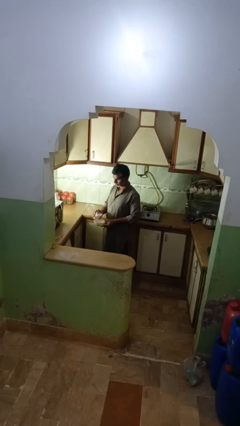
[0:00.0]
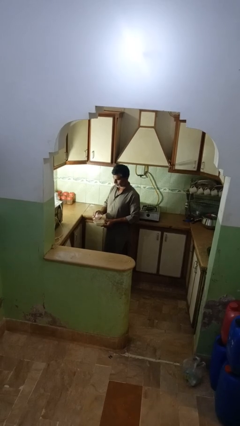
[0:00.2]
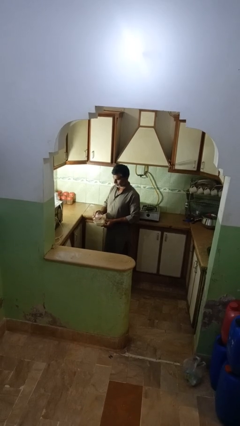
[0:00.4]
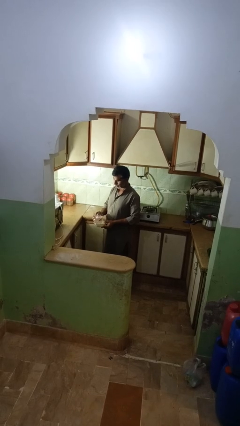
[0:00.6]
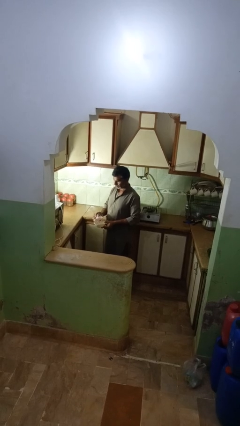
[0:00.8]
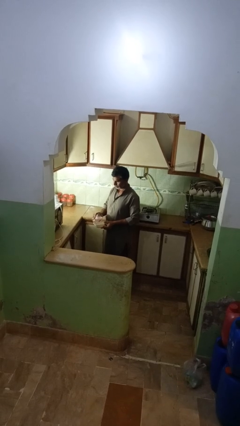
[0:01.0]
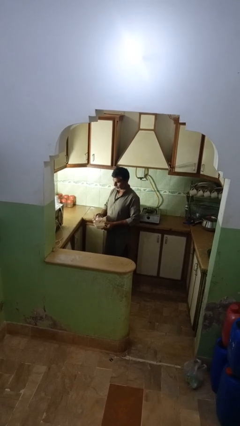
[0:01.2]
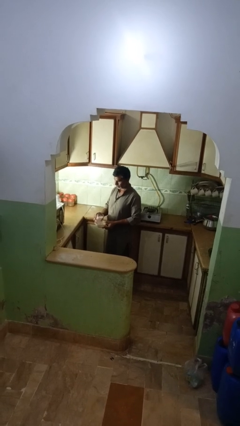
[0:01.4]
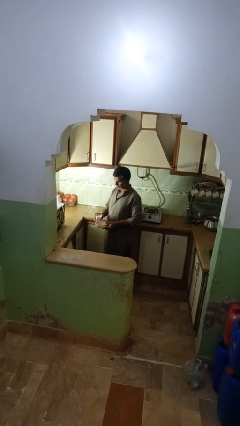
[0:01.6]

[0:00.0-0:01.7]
person pours into bowl

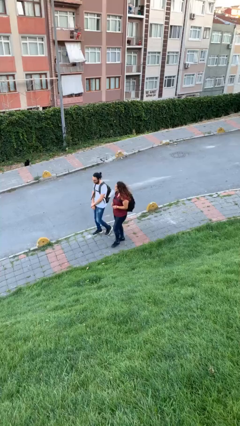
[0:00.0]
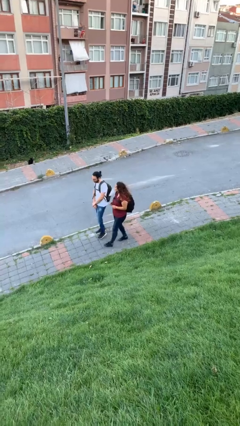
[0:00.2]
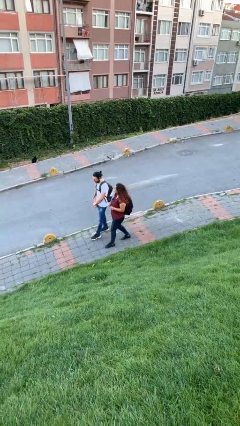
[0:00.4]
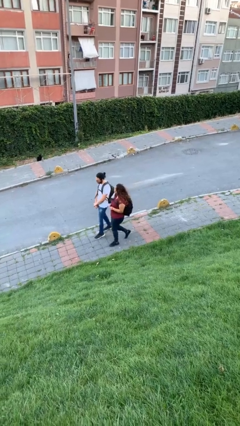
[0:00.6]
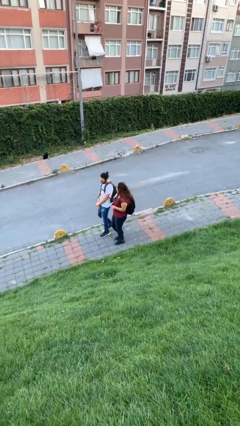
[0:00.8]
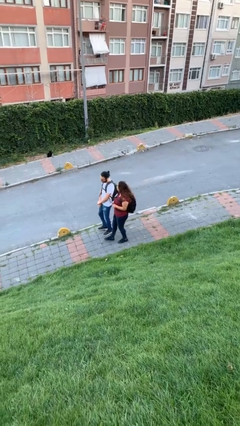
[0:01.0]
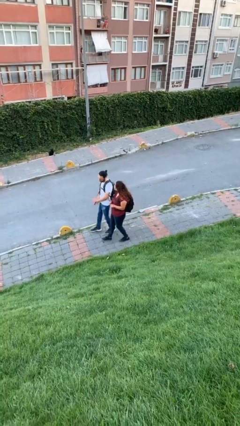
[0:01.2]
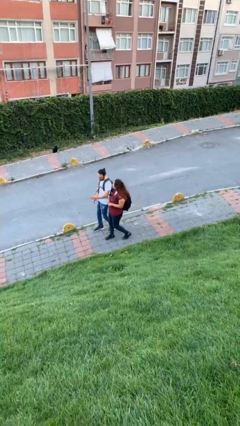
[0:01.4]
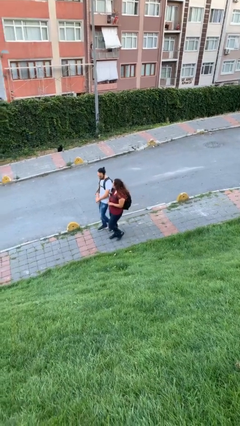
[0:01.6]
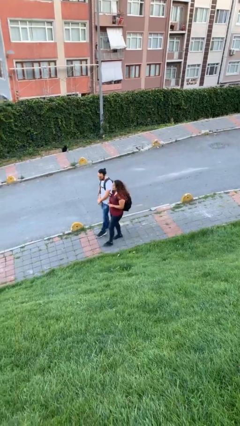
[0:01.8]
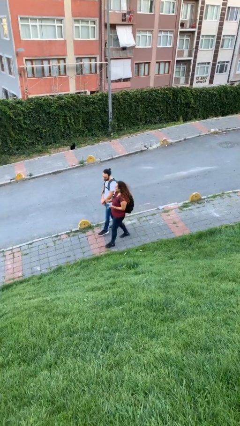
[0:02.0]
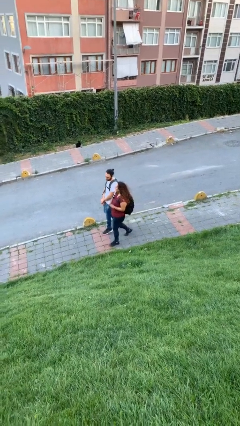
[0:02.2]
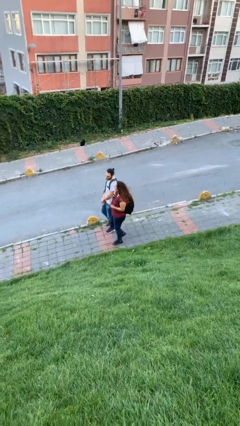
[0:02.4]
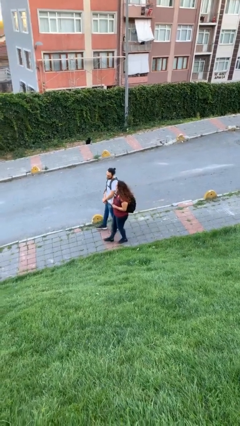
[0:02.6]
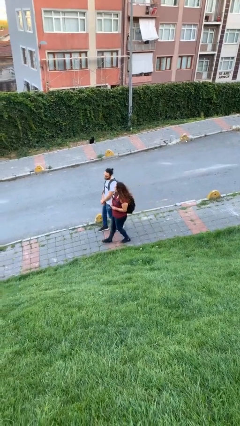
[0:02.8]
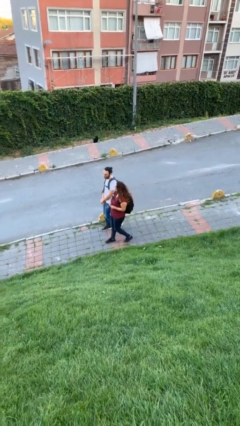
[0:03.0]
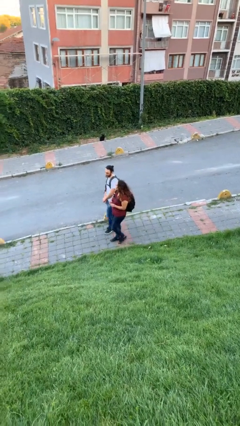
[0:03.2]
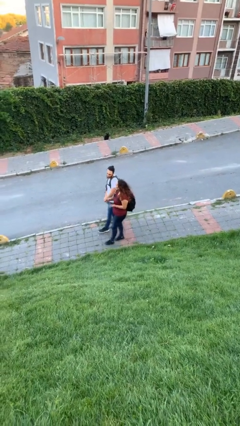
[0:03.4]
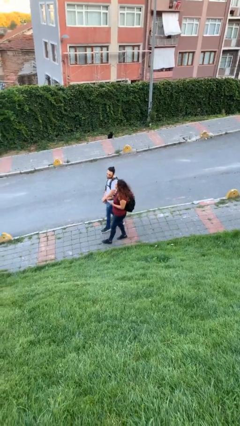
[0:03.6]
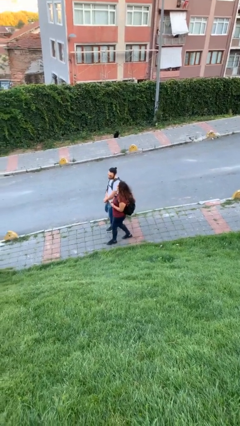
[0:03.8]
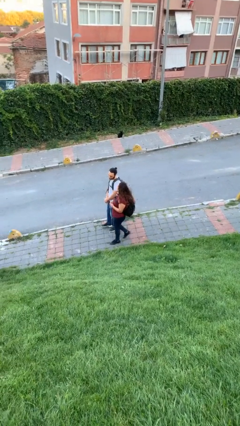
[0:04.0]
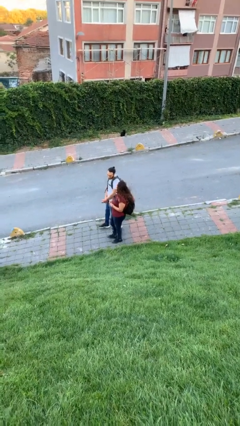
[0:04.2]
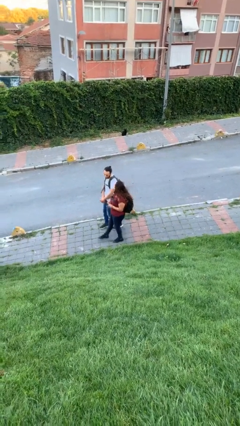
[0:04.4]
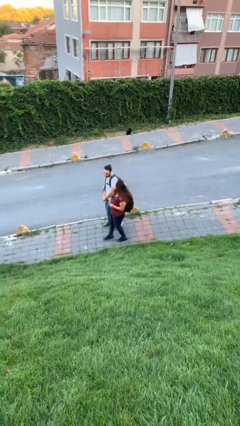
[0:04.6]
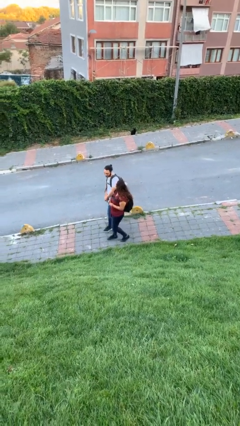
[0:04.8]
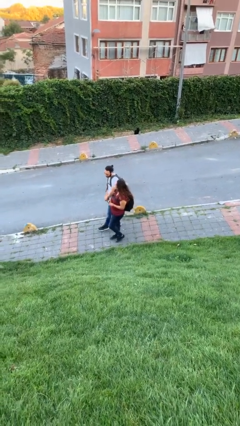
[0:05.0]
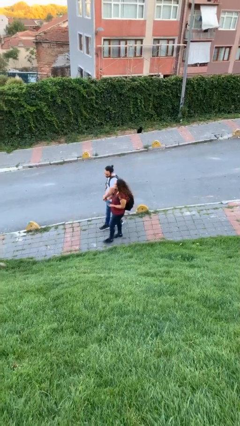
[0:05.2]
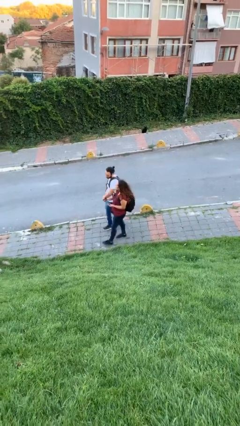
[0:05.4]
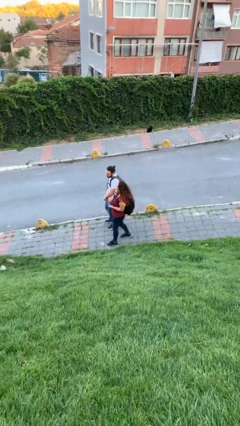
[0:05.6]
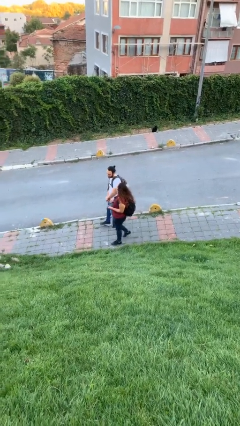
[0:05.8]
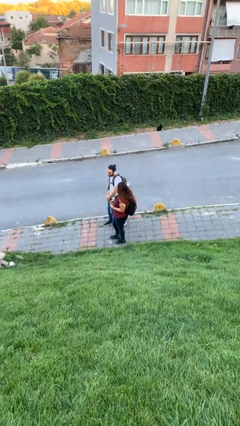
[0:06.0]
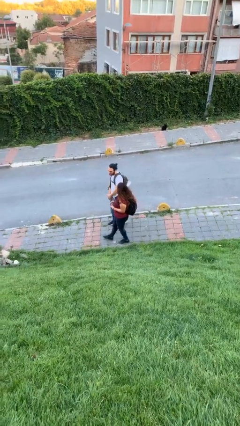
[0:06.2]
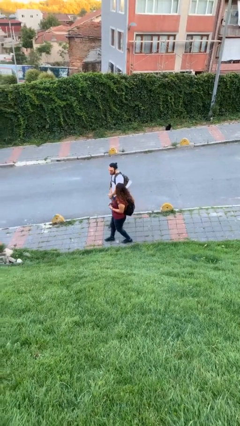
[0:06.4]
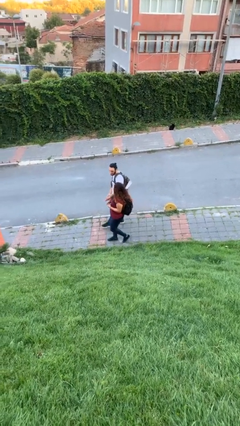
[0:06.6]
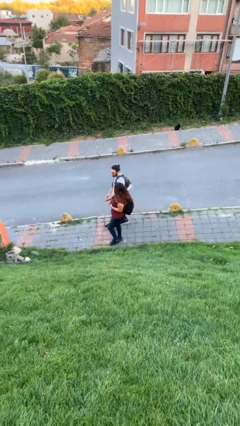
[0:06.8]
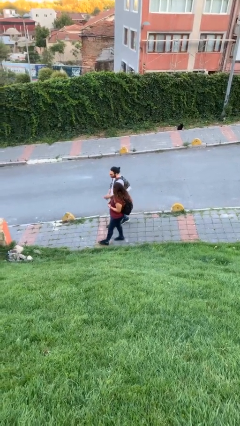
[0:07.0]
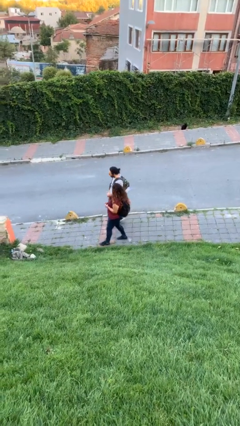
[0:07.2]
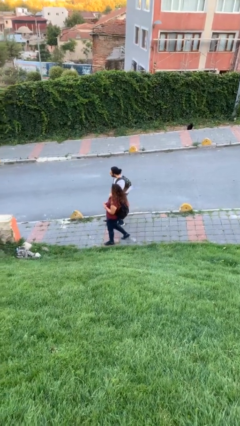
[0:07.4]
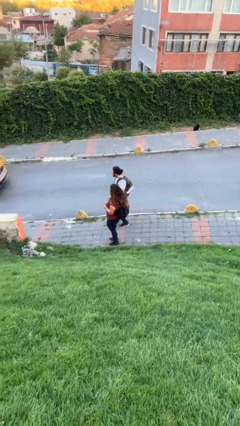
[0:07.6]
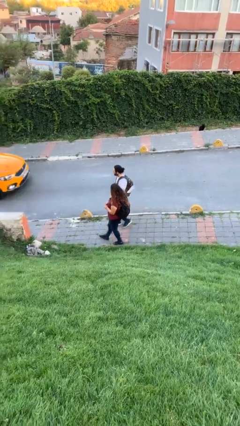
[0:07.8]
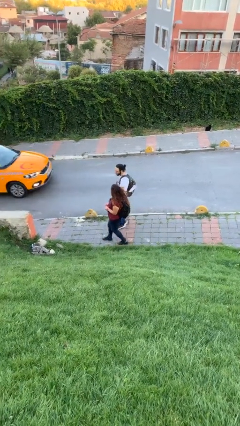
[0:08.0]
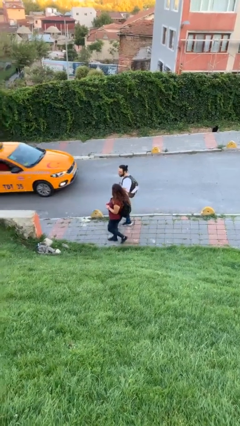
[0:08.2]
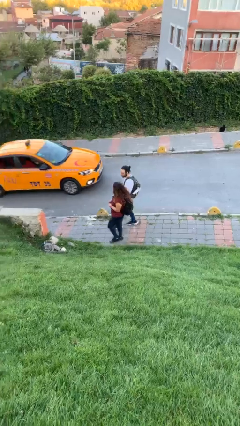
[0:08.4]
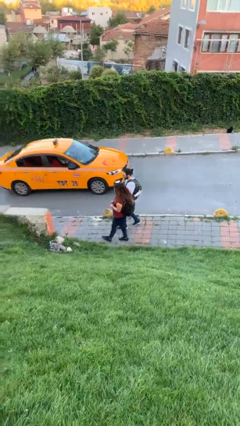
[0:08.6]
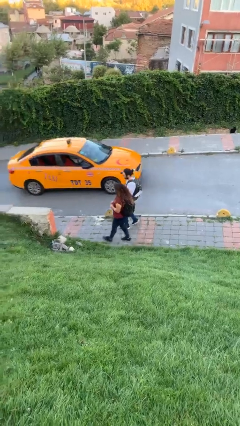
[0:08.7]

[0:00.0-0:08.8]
person talks to person

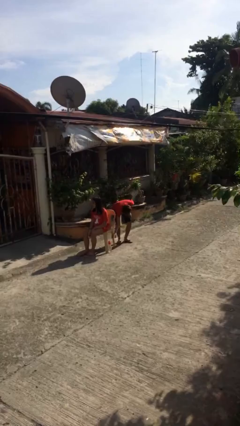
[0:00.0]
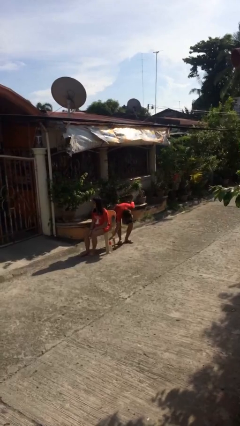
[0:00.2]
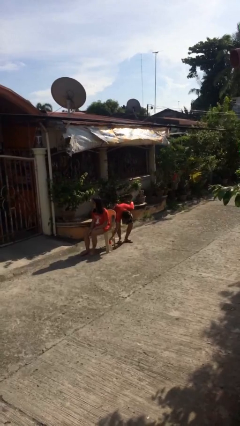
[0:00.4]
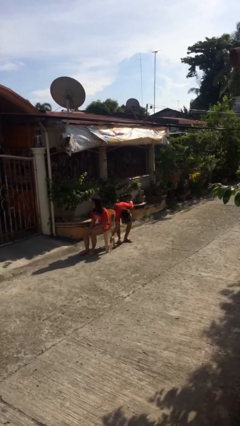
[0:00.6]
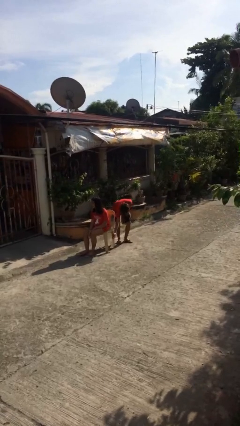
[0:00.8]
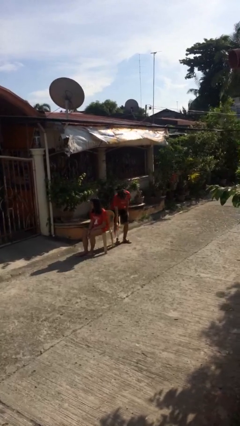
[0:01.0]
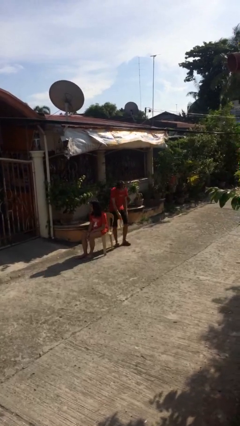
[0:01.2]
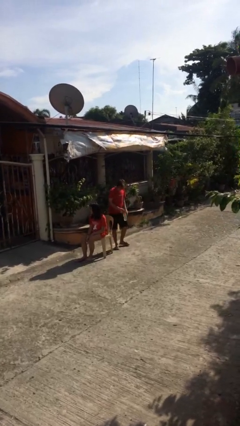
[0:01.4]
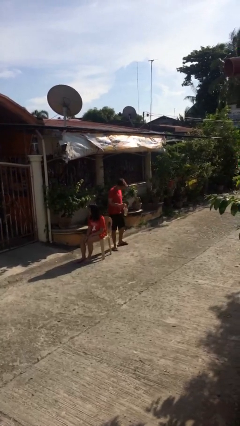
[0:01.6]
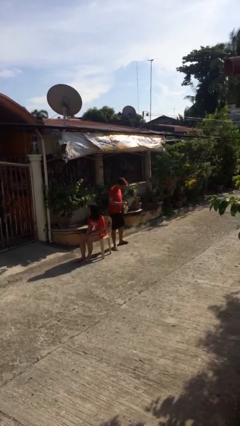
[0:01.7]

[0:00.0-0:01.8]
person steals object from person

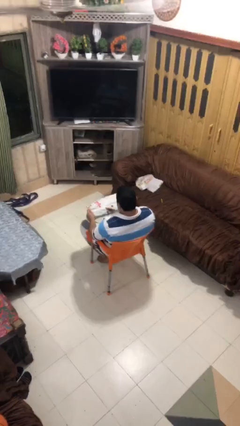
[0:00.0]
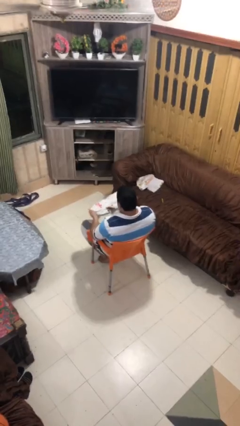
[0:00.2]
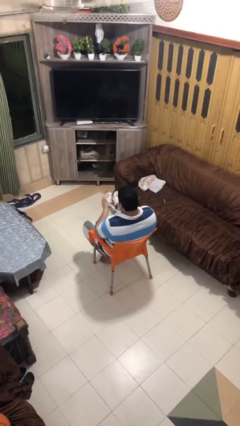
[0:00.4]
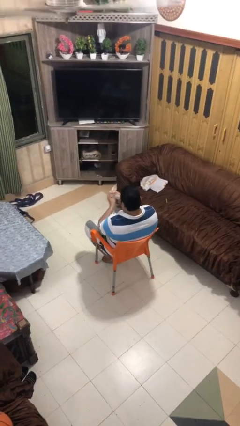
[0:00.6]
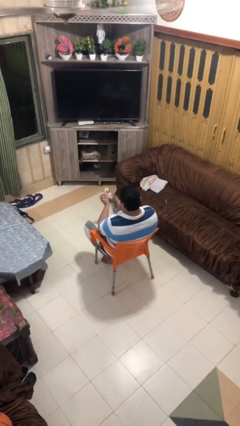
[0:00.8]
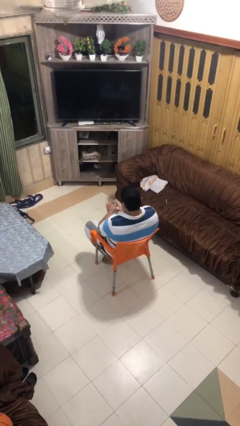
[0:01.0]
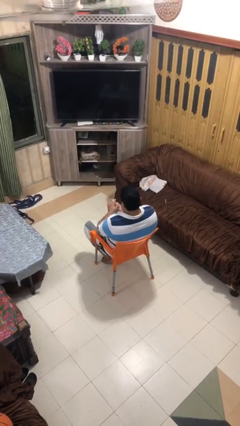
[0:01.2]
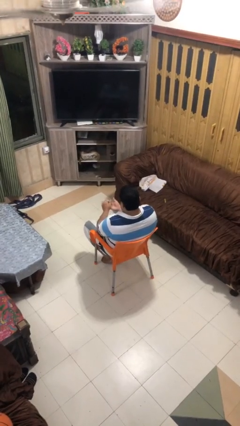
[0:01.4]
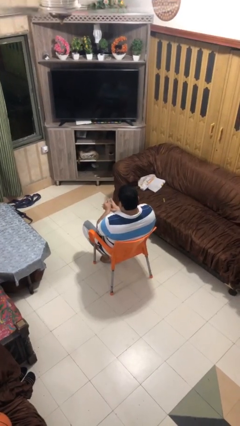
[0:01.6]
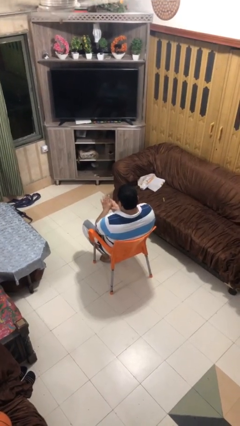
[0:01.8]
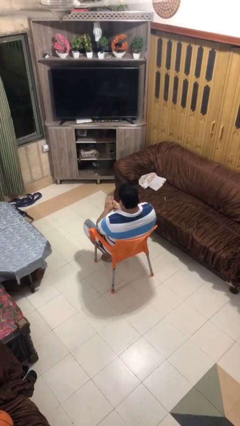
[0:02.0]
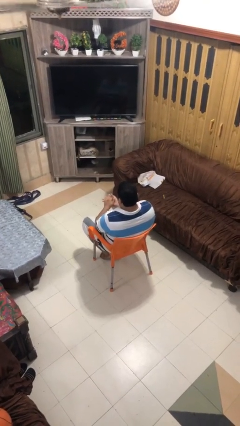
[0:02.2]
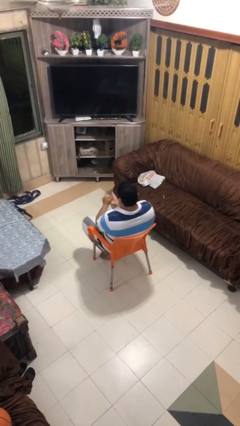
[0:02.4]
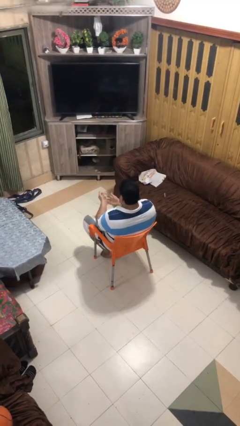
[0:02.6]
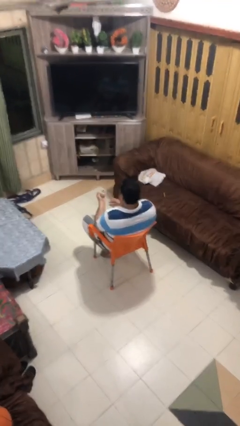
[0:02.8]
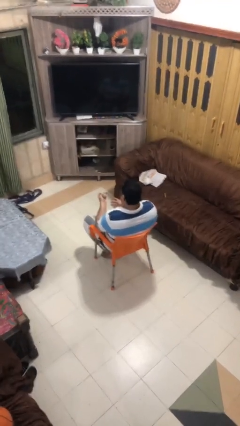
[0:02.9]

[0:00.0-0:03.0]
person crumples paper

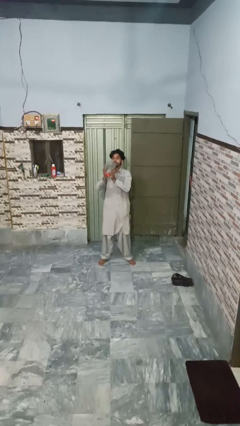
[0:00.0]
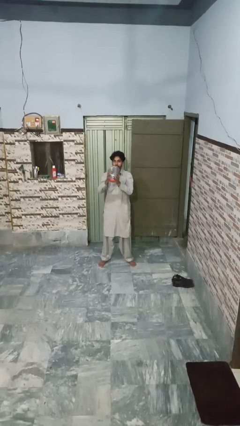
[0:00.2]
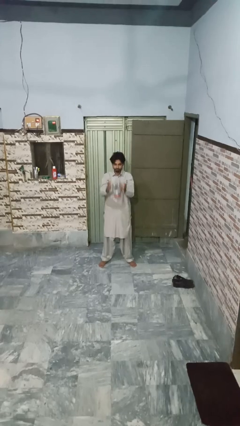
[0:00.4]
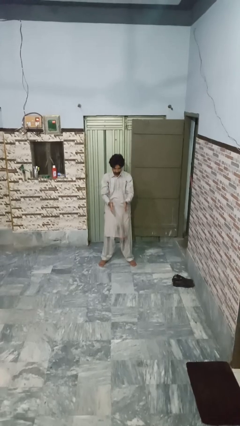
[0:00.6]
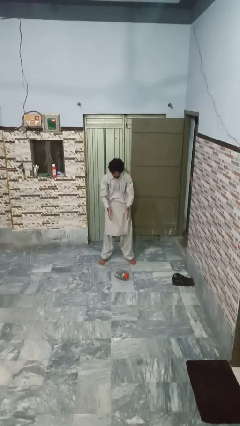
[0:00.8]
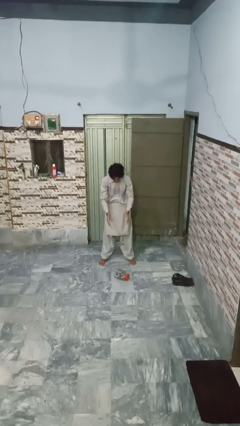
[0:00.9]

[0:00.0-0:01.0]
person drops object

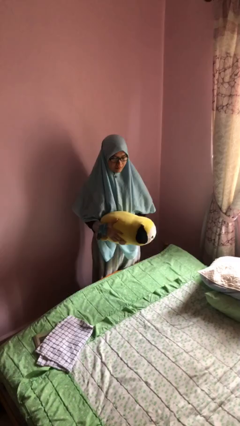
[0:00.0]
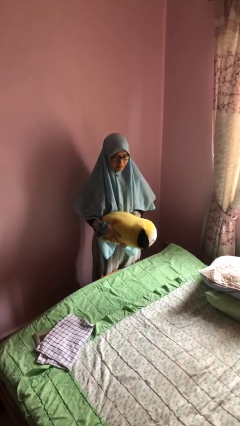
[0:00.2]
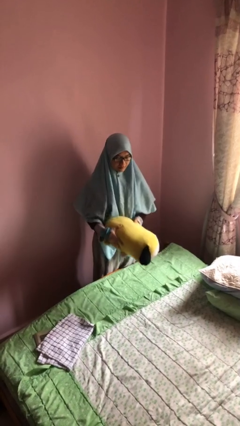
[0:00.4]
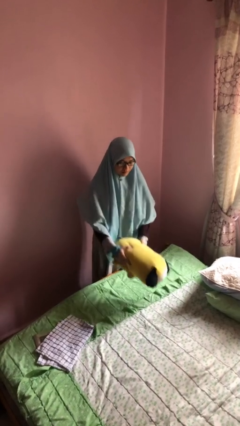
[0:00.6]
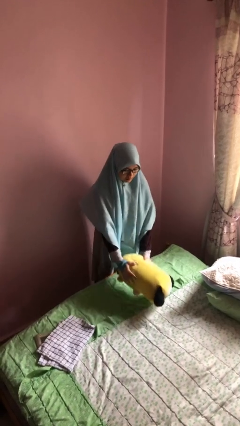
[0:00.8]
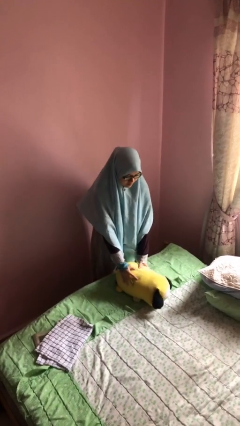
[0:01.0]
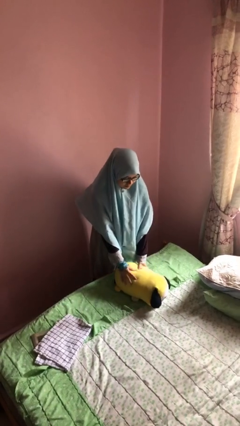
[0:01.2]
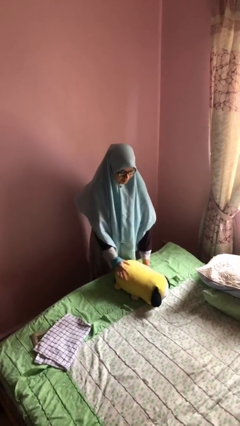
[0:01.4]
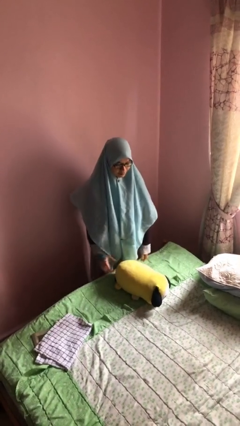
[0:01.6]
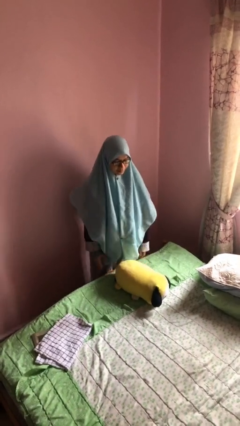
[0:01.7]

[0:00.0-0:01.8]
person puts down object on bed
